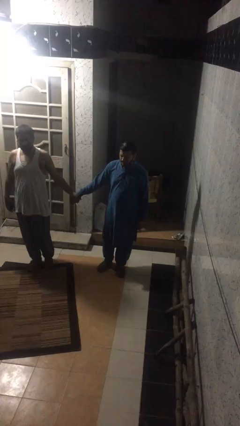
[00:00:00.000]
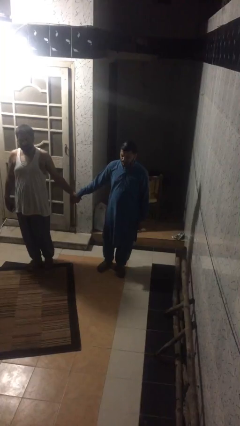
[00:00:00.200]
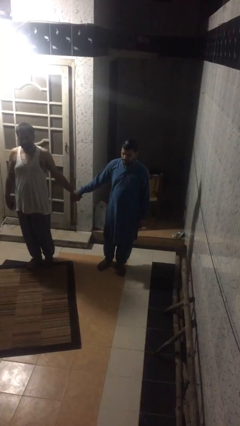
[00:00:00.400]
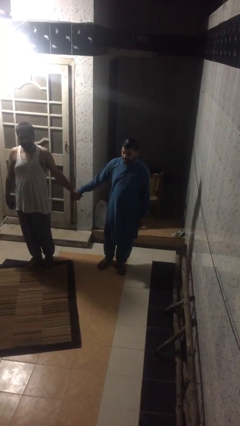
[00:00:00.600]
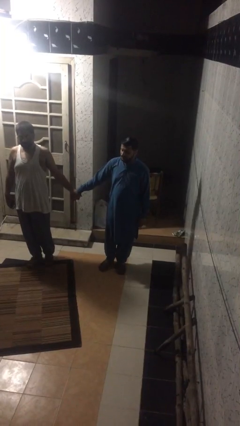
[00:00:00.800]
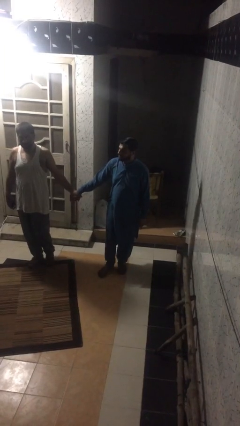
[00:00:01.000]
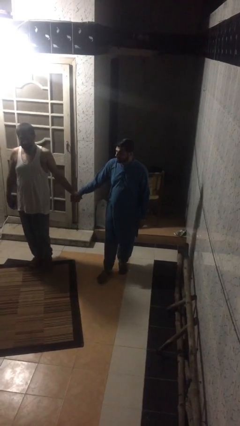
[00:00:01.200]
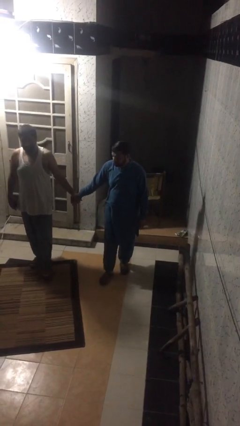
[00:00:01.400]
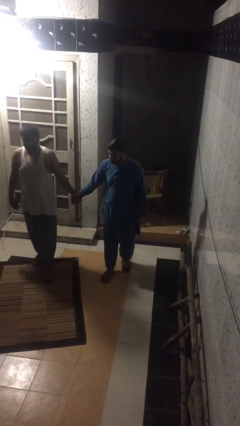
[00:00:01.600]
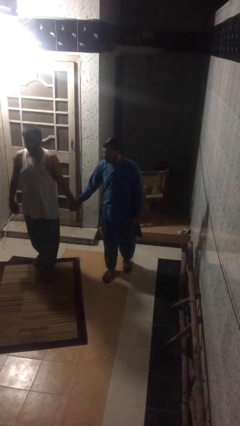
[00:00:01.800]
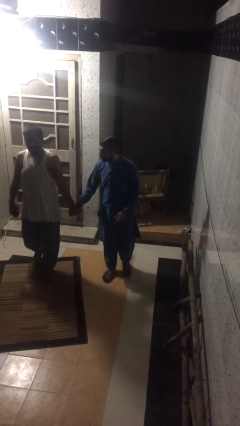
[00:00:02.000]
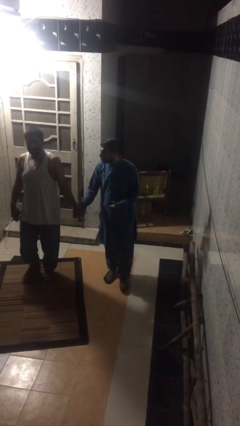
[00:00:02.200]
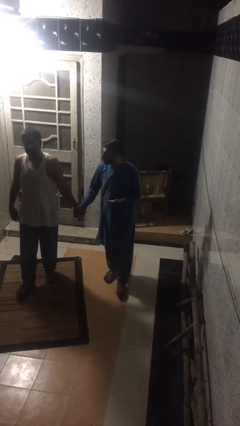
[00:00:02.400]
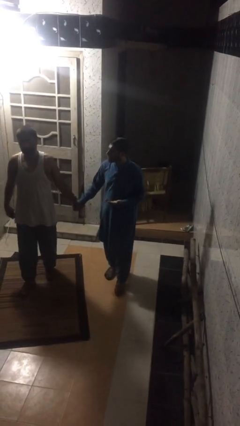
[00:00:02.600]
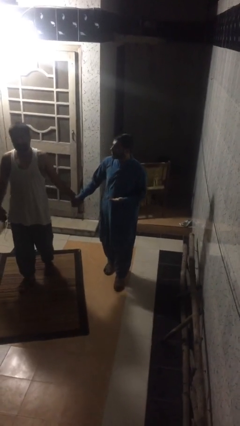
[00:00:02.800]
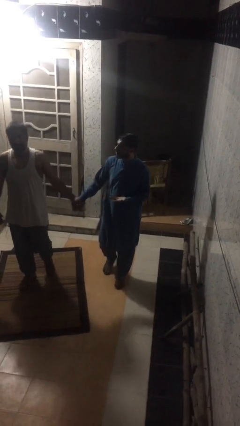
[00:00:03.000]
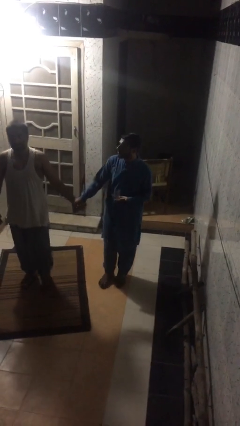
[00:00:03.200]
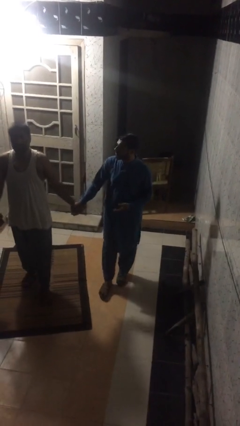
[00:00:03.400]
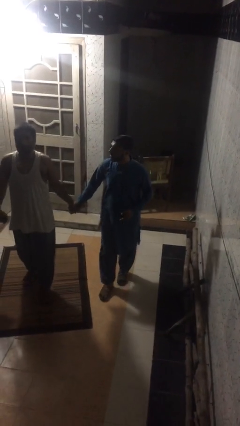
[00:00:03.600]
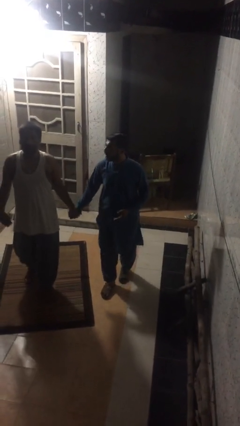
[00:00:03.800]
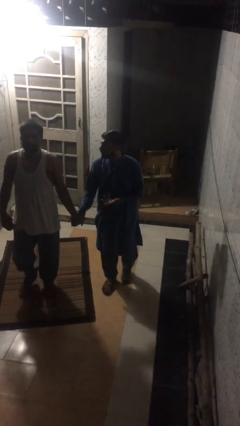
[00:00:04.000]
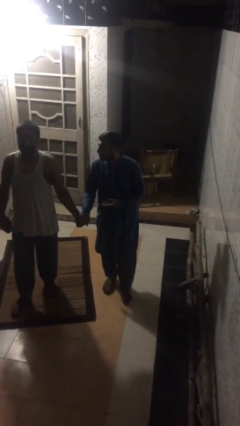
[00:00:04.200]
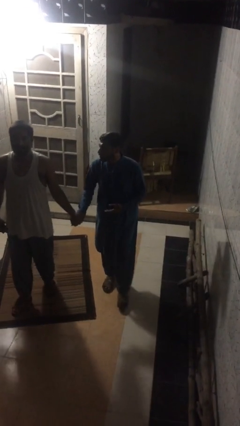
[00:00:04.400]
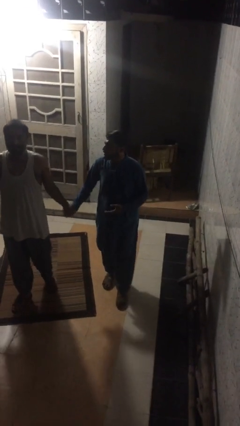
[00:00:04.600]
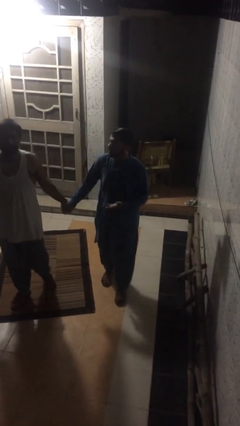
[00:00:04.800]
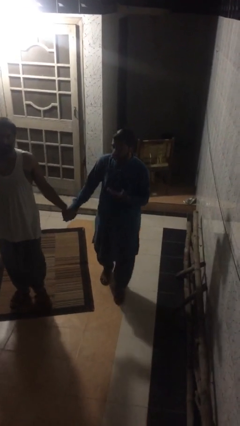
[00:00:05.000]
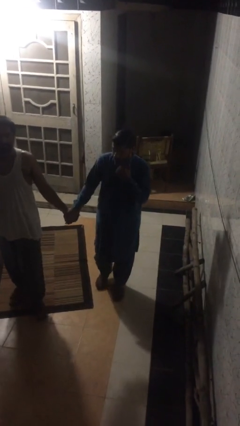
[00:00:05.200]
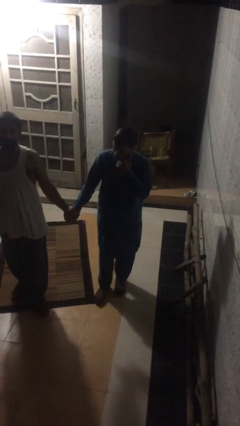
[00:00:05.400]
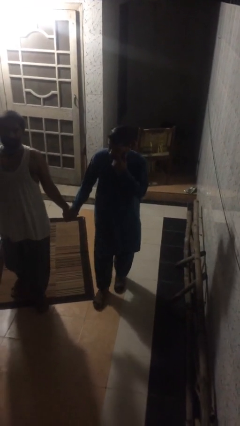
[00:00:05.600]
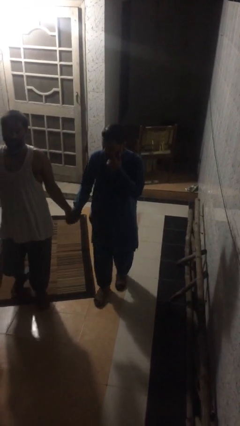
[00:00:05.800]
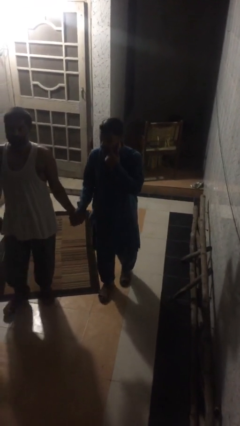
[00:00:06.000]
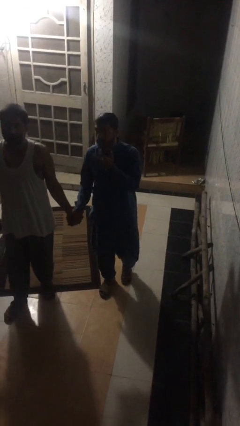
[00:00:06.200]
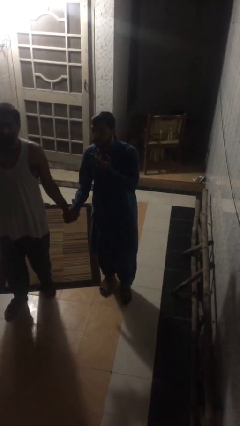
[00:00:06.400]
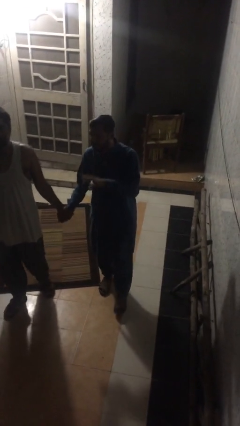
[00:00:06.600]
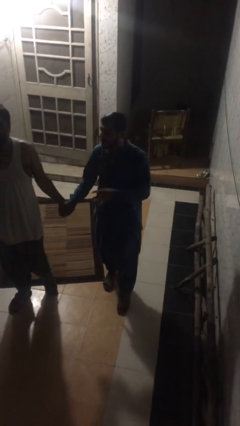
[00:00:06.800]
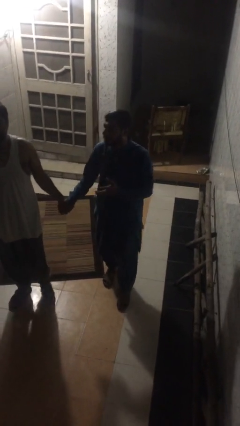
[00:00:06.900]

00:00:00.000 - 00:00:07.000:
person holds hand

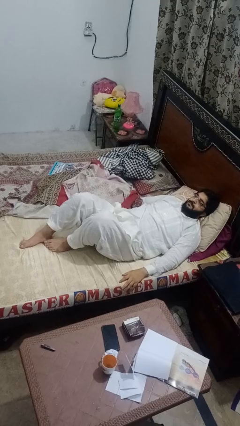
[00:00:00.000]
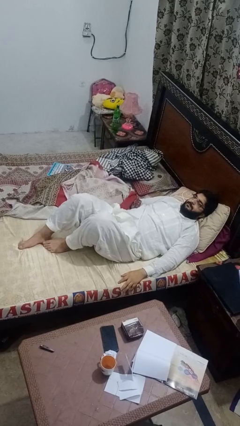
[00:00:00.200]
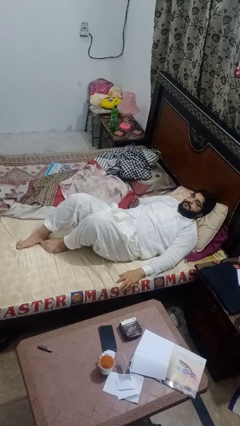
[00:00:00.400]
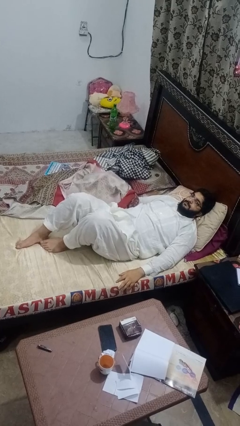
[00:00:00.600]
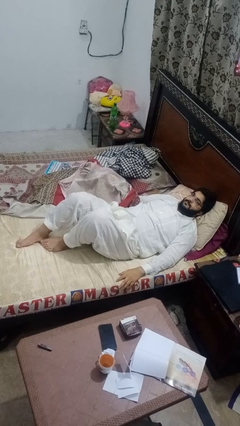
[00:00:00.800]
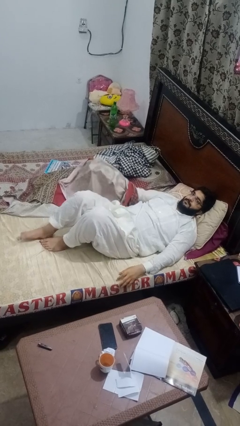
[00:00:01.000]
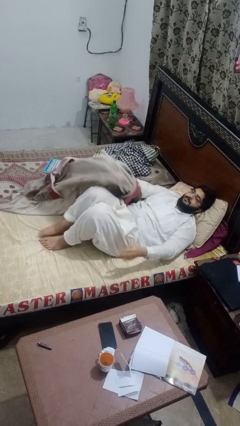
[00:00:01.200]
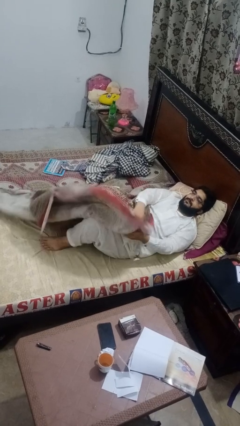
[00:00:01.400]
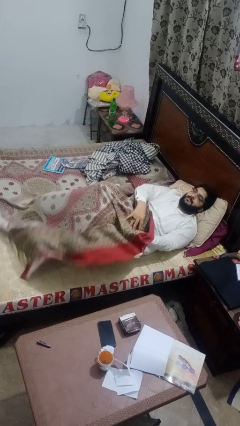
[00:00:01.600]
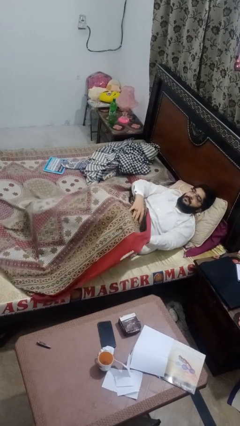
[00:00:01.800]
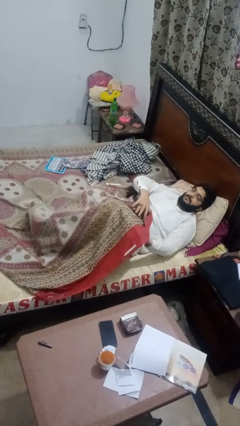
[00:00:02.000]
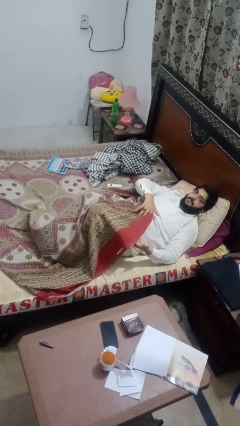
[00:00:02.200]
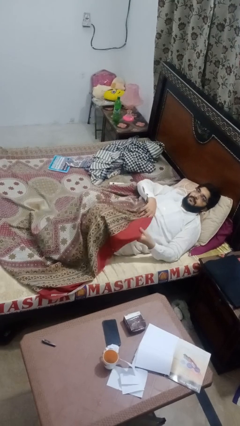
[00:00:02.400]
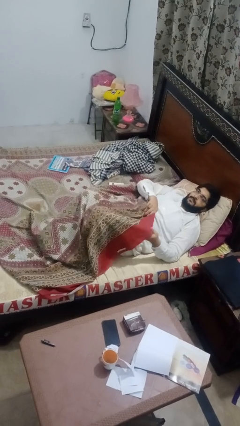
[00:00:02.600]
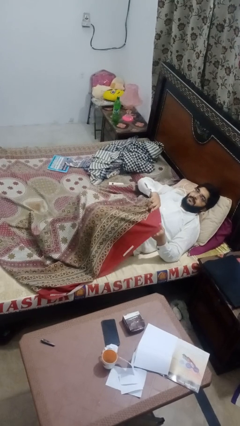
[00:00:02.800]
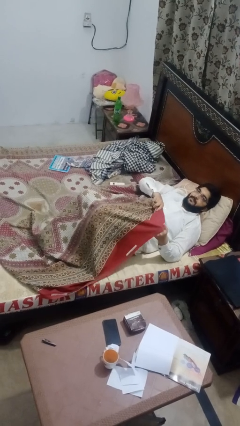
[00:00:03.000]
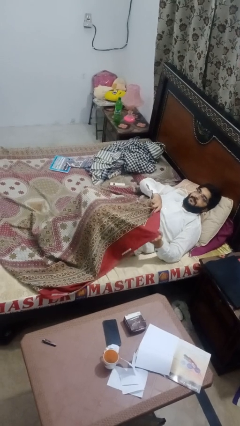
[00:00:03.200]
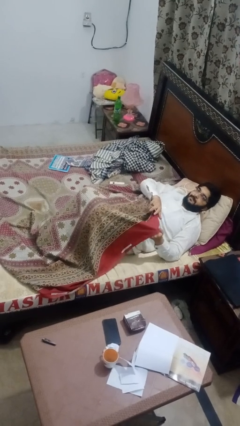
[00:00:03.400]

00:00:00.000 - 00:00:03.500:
person covers with bedsheets

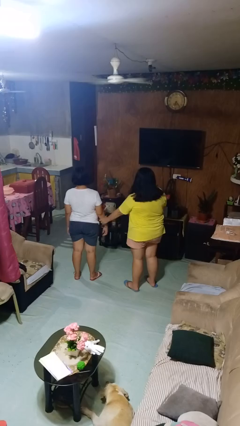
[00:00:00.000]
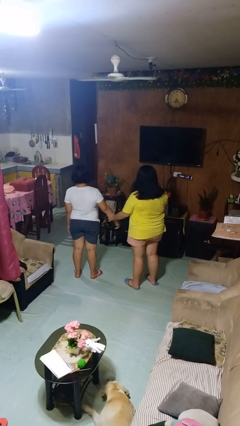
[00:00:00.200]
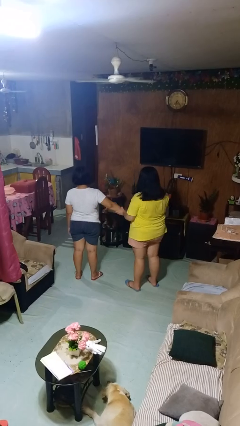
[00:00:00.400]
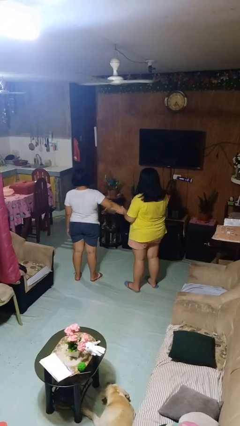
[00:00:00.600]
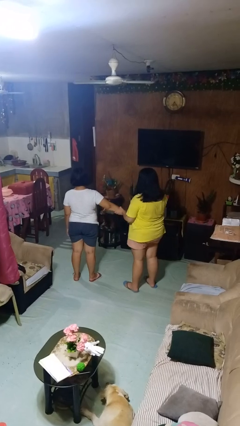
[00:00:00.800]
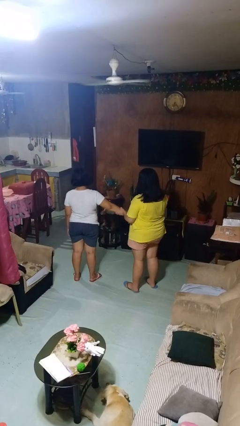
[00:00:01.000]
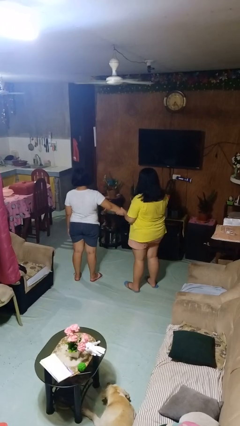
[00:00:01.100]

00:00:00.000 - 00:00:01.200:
person grabs person by forearm

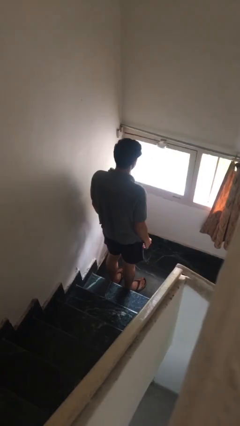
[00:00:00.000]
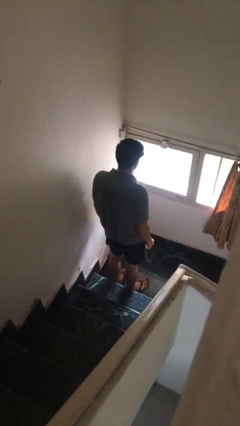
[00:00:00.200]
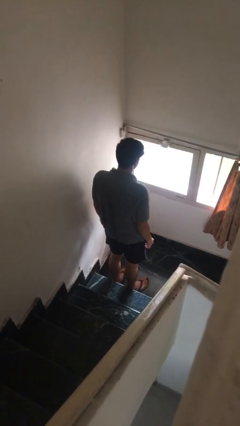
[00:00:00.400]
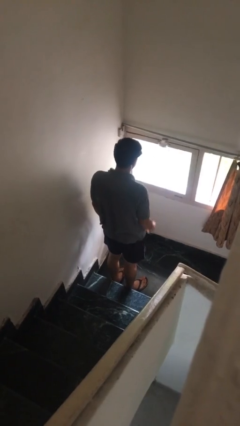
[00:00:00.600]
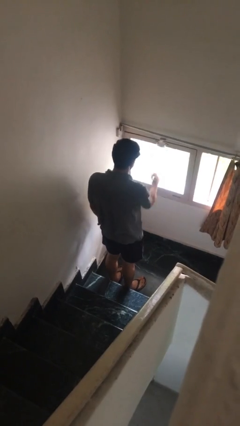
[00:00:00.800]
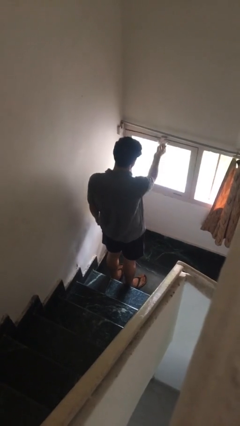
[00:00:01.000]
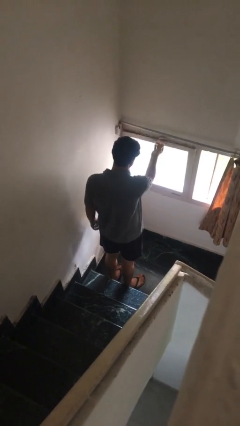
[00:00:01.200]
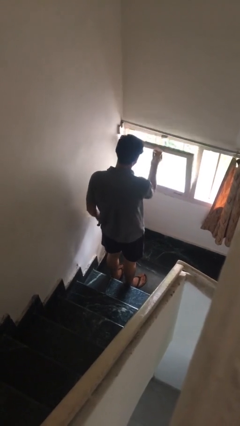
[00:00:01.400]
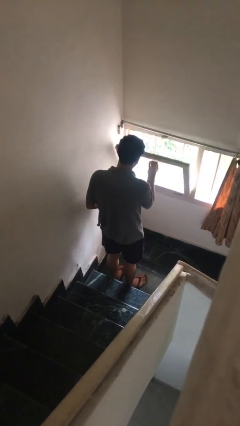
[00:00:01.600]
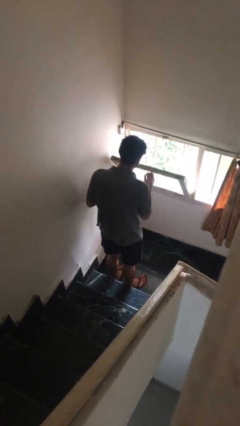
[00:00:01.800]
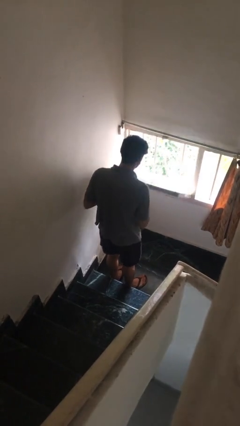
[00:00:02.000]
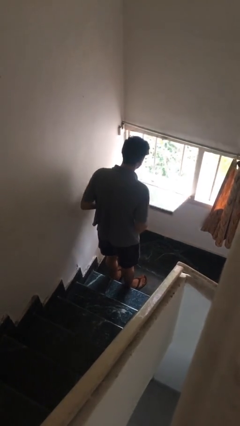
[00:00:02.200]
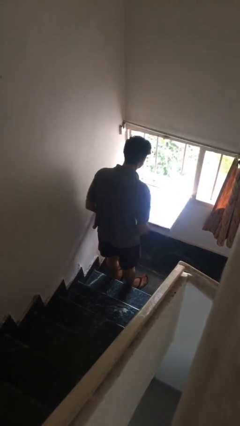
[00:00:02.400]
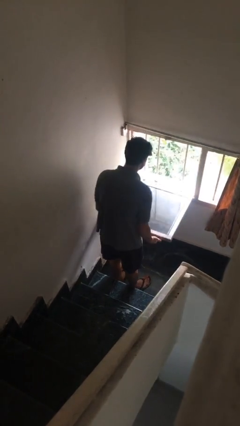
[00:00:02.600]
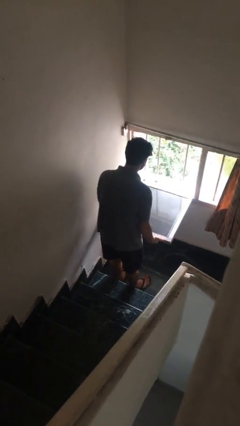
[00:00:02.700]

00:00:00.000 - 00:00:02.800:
person opens home window

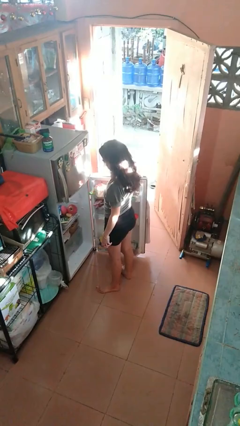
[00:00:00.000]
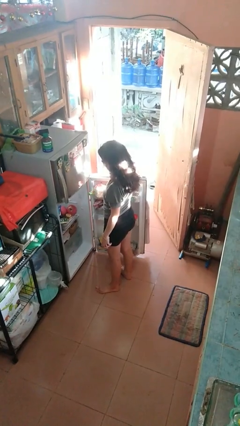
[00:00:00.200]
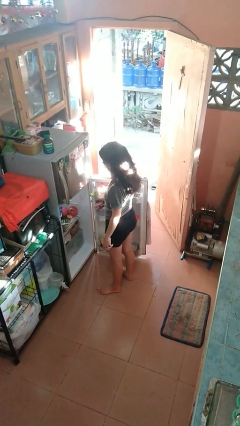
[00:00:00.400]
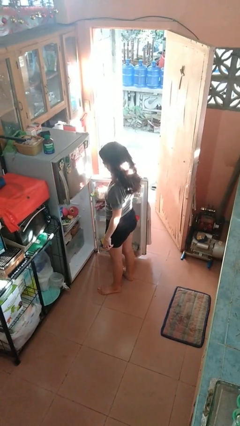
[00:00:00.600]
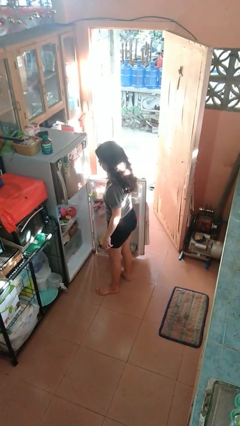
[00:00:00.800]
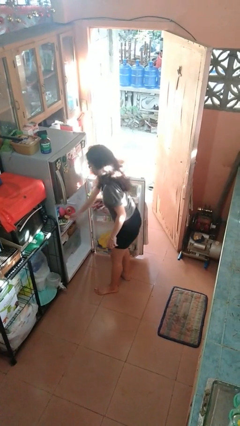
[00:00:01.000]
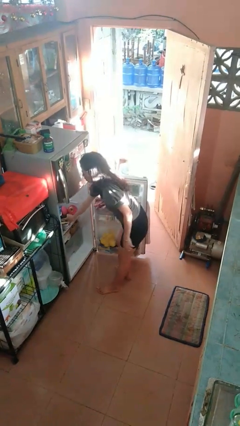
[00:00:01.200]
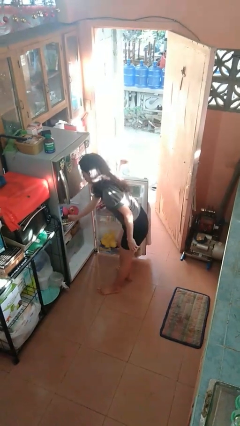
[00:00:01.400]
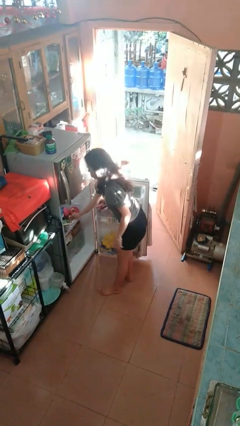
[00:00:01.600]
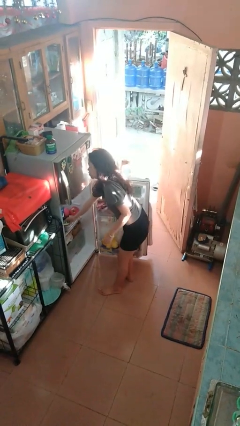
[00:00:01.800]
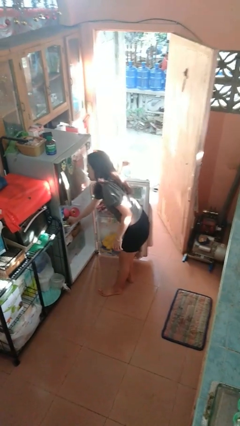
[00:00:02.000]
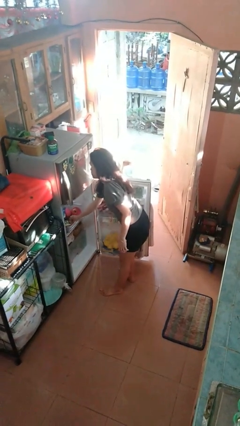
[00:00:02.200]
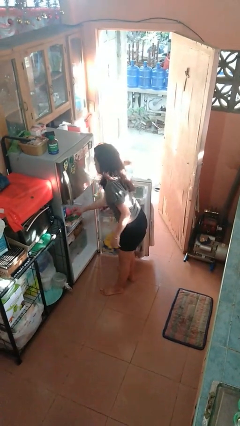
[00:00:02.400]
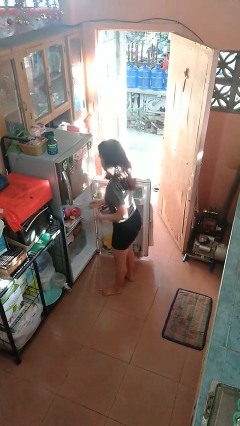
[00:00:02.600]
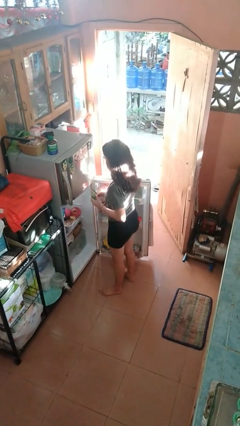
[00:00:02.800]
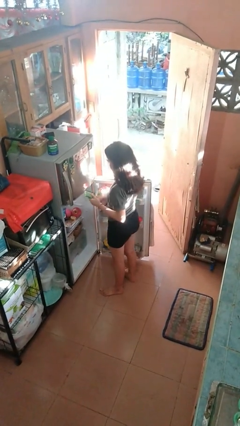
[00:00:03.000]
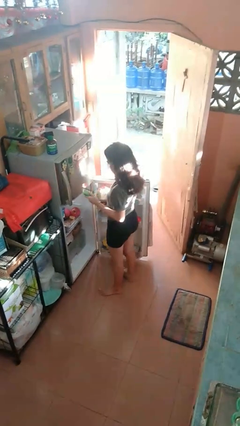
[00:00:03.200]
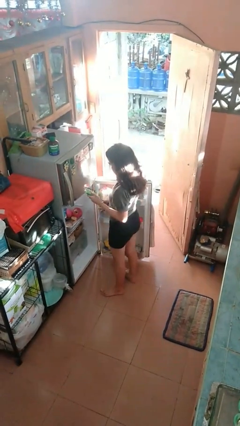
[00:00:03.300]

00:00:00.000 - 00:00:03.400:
person takes object from refrigerator
